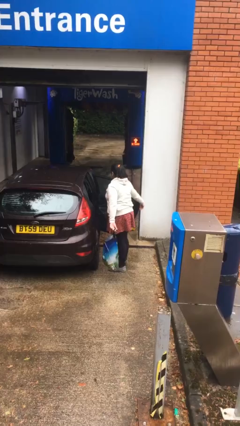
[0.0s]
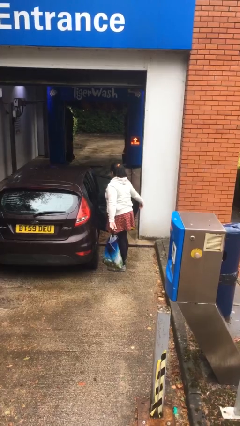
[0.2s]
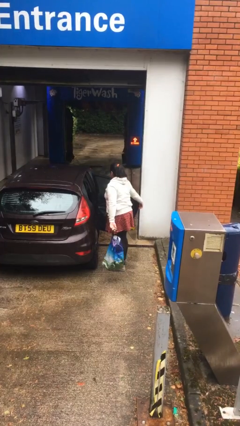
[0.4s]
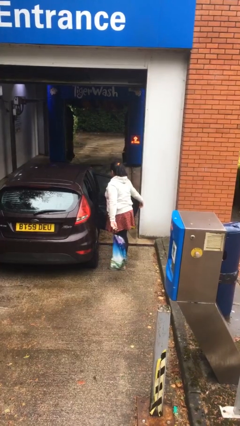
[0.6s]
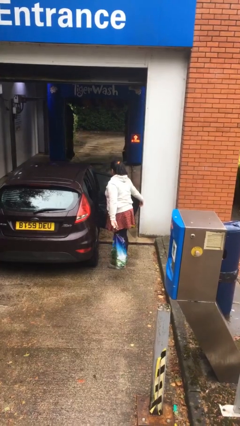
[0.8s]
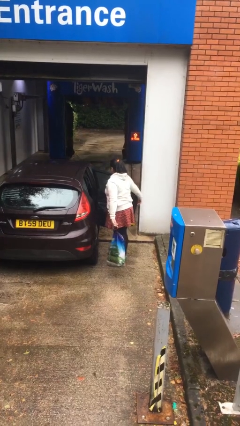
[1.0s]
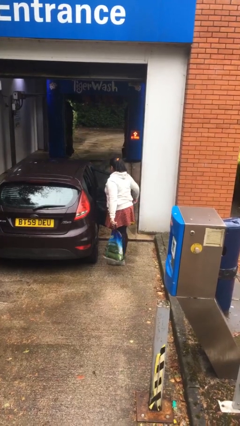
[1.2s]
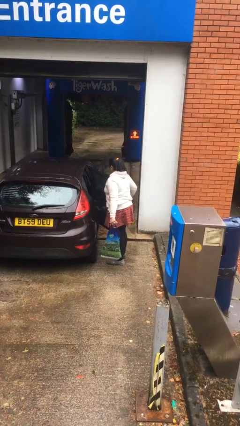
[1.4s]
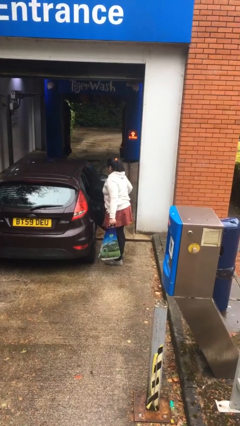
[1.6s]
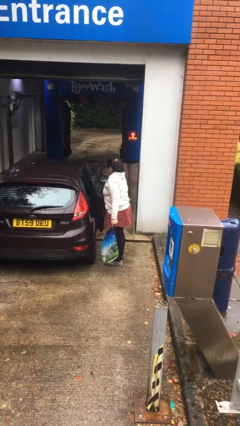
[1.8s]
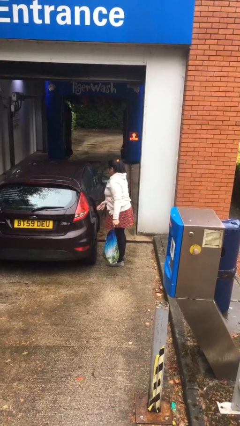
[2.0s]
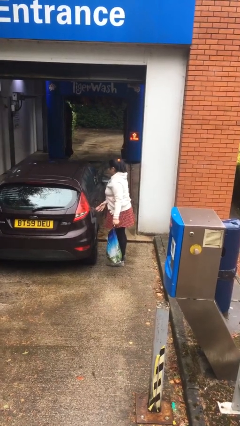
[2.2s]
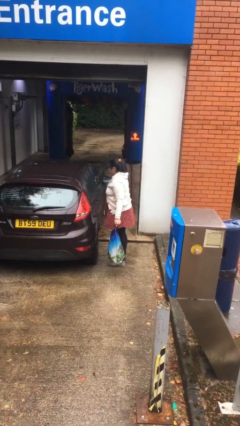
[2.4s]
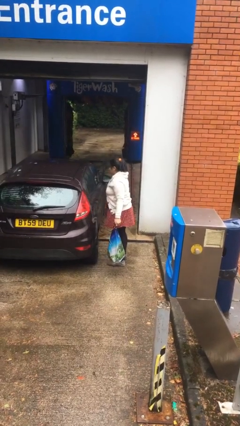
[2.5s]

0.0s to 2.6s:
person closes car door

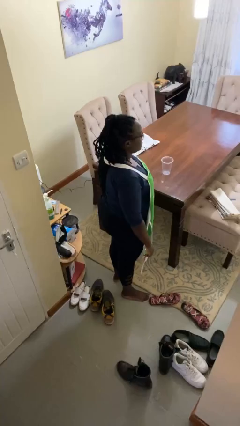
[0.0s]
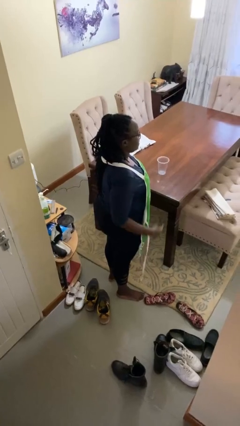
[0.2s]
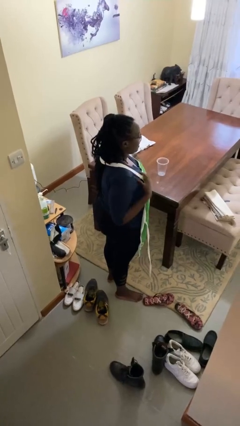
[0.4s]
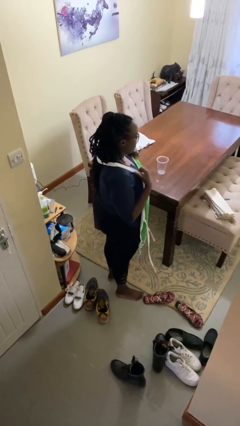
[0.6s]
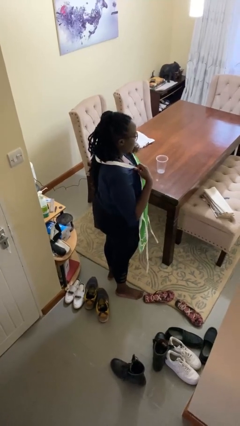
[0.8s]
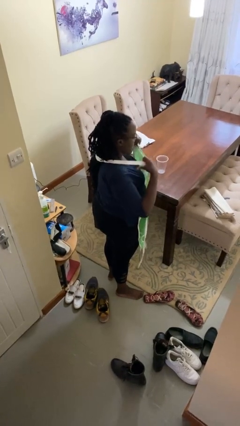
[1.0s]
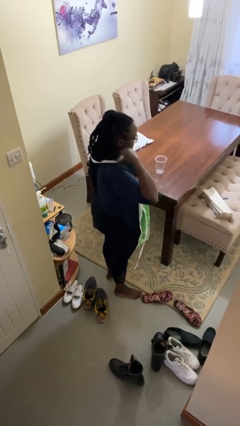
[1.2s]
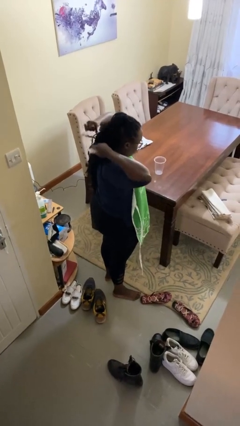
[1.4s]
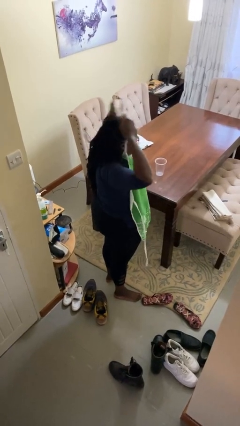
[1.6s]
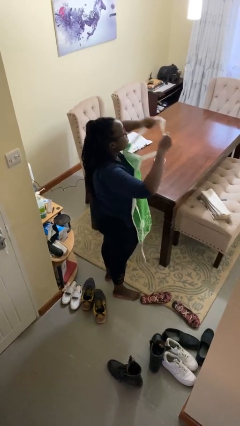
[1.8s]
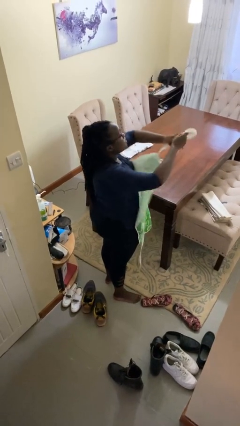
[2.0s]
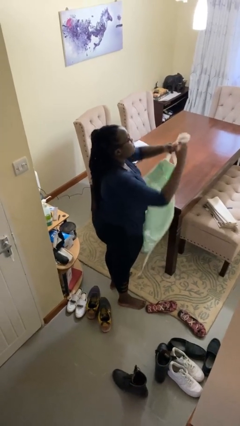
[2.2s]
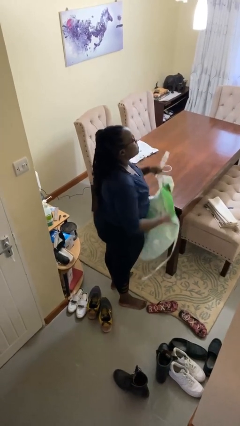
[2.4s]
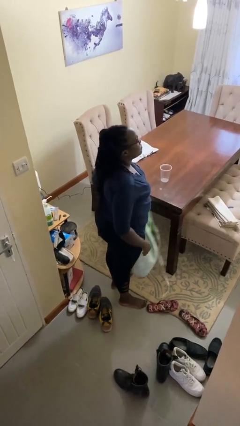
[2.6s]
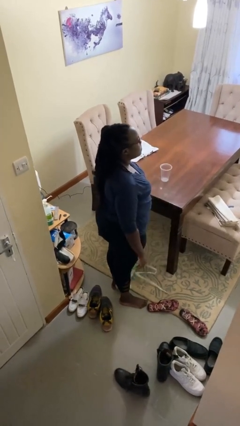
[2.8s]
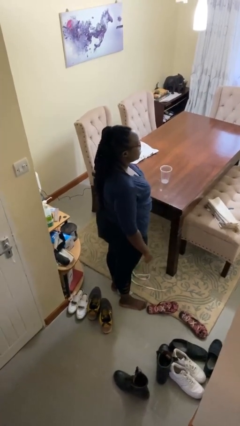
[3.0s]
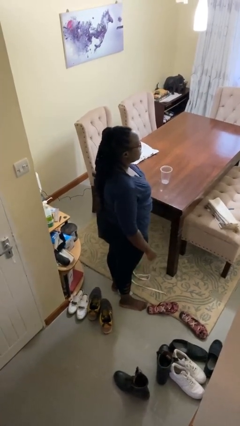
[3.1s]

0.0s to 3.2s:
person takes off apron

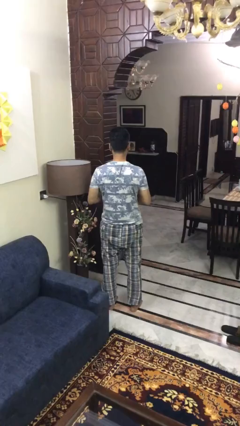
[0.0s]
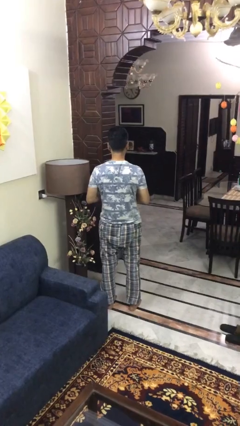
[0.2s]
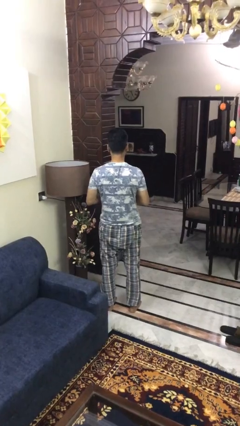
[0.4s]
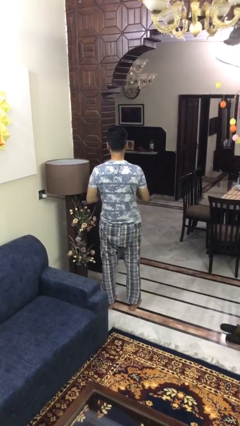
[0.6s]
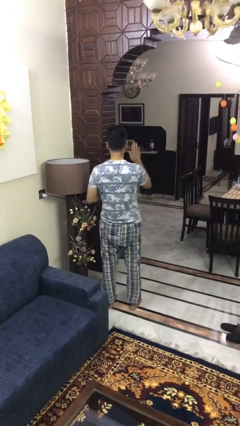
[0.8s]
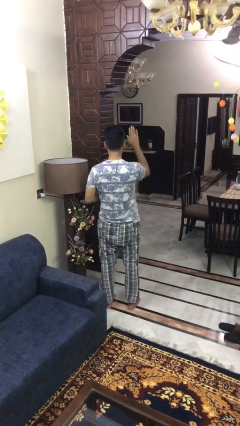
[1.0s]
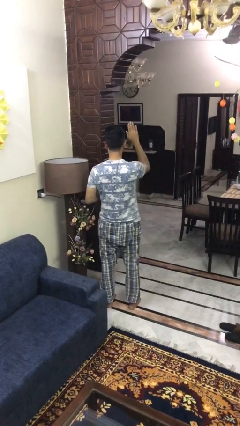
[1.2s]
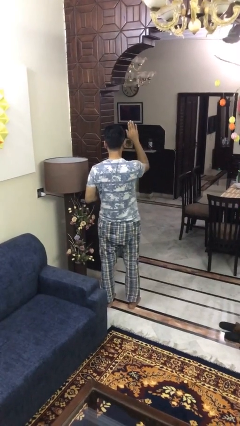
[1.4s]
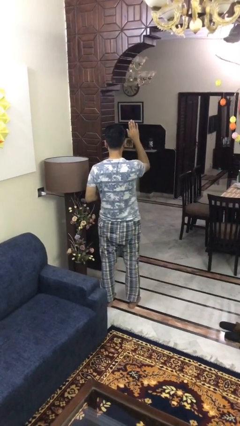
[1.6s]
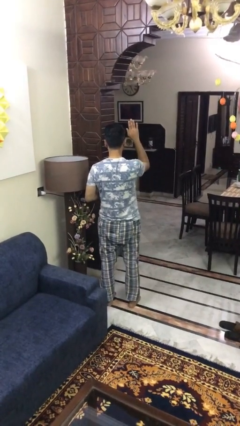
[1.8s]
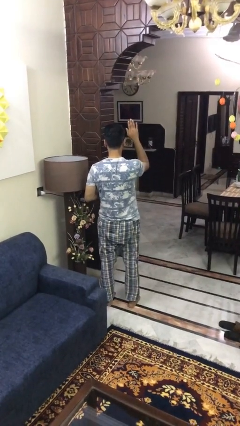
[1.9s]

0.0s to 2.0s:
person gestures raise hand

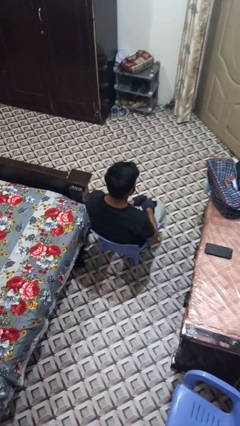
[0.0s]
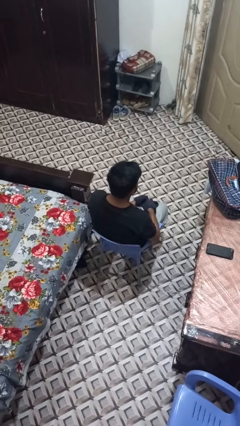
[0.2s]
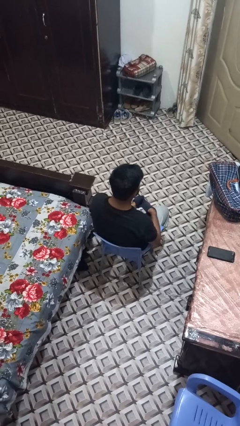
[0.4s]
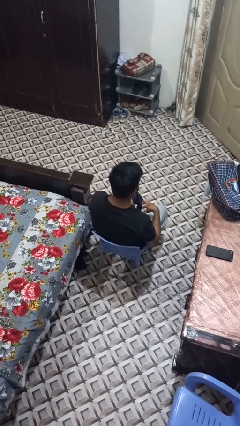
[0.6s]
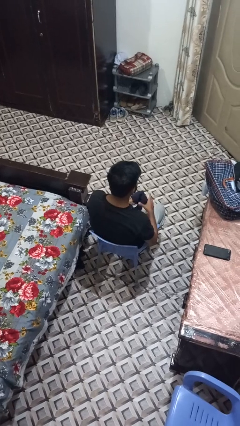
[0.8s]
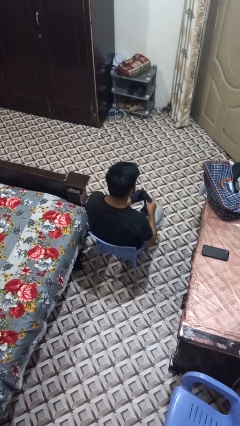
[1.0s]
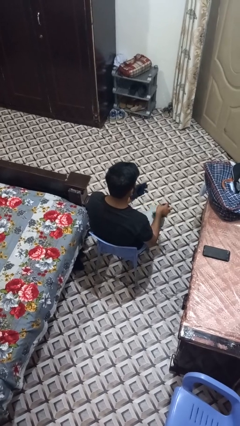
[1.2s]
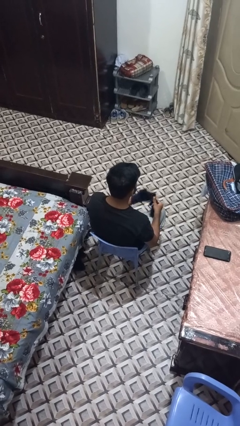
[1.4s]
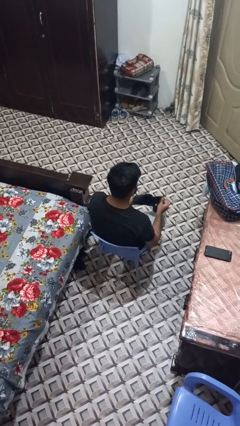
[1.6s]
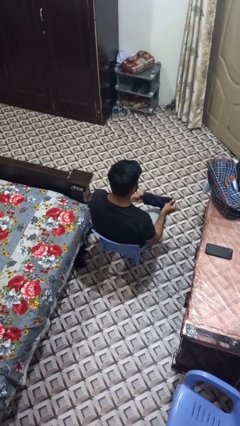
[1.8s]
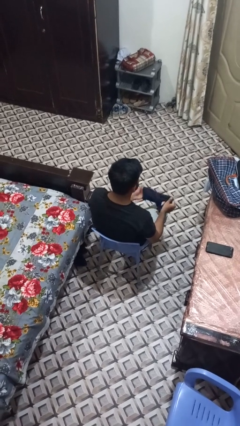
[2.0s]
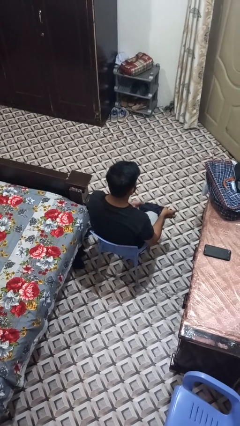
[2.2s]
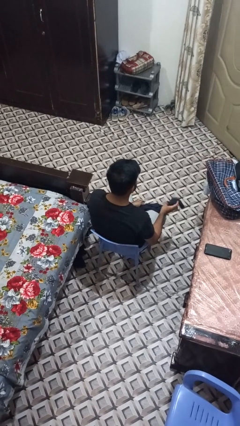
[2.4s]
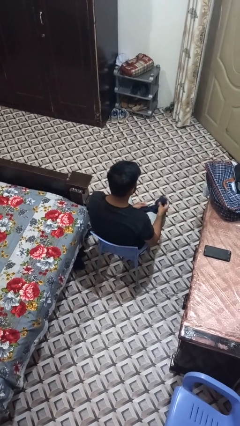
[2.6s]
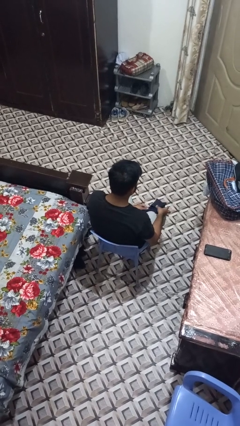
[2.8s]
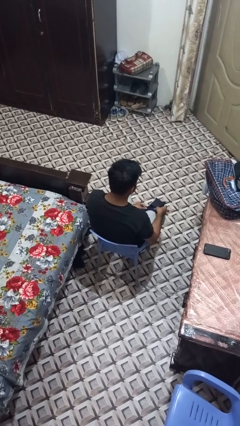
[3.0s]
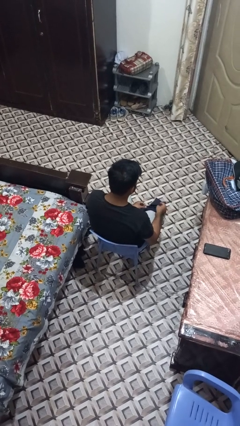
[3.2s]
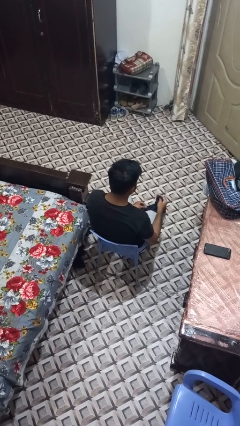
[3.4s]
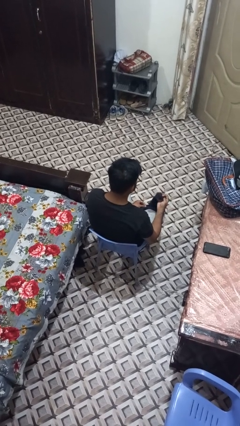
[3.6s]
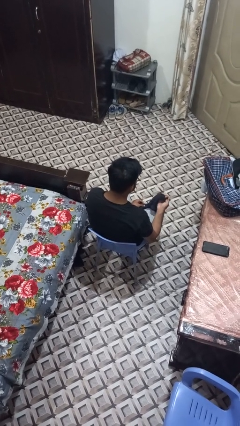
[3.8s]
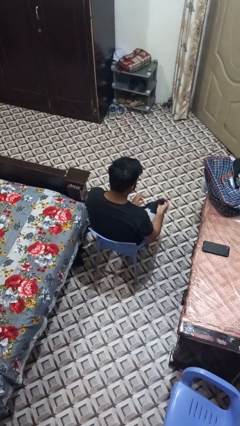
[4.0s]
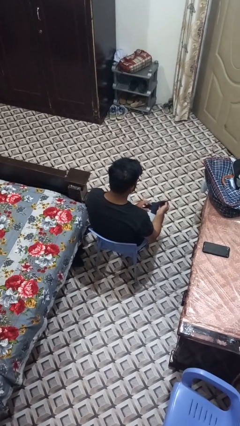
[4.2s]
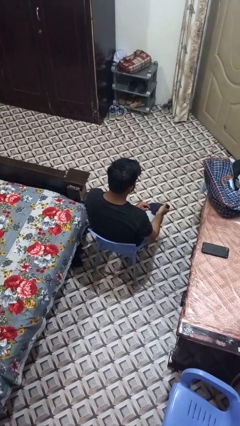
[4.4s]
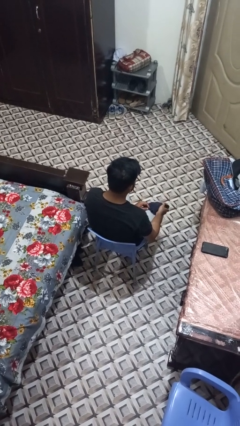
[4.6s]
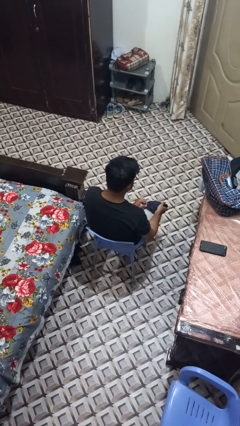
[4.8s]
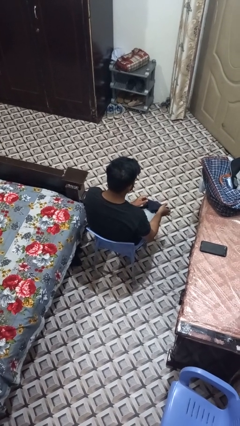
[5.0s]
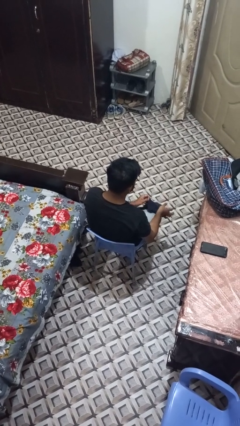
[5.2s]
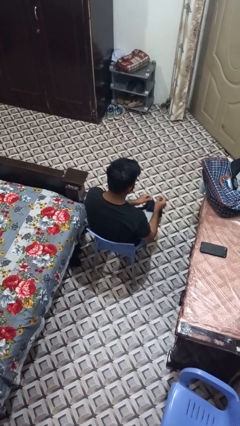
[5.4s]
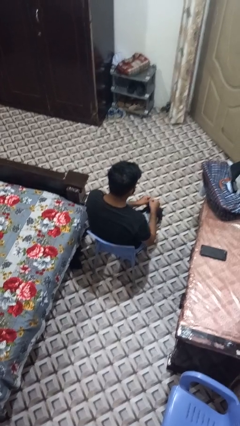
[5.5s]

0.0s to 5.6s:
person takes off gloves

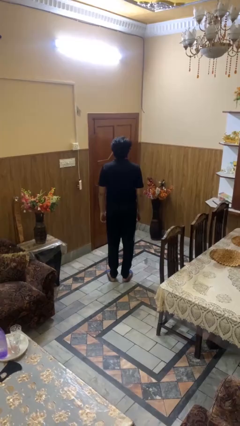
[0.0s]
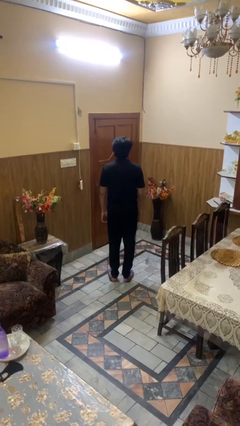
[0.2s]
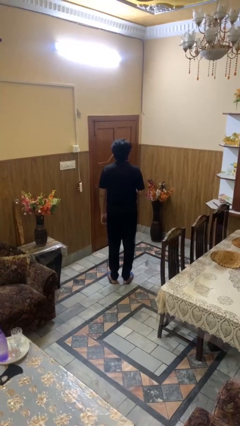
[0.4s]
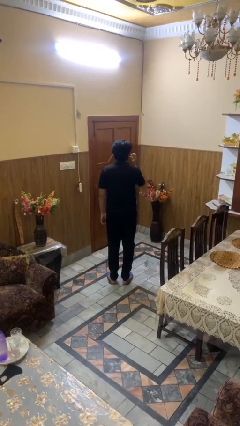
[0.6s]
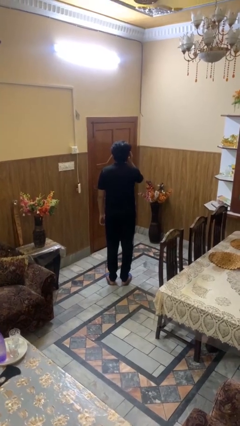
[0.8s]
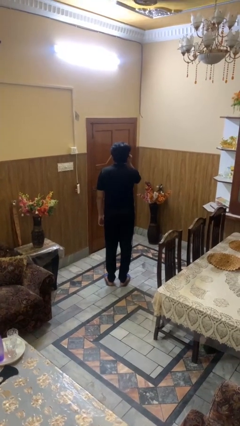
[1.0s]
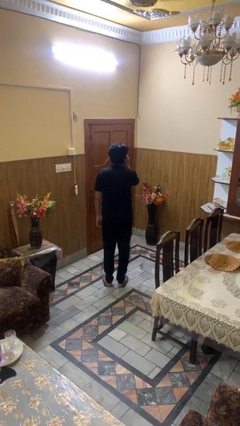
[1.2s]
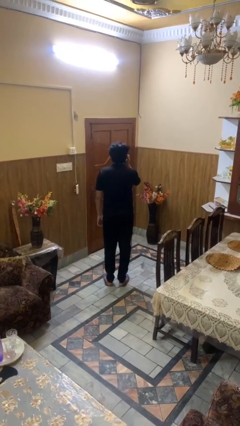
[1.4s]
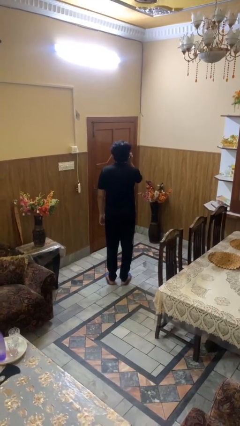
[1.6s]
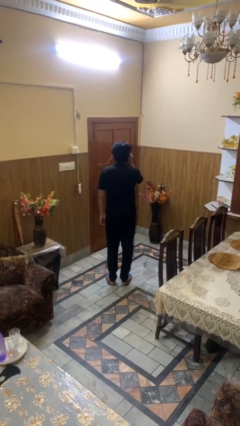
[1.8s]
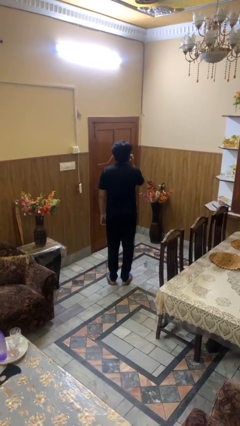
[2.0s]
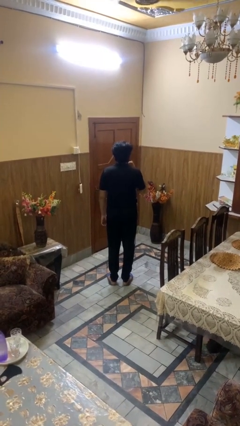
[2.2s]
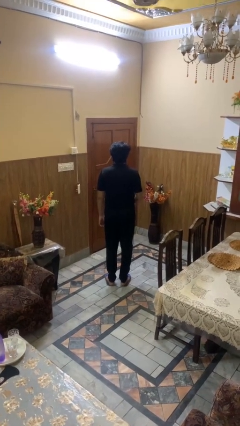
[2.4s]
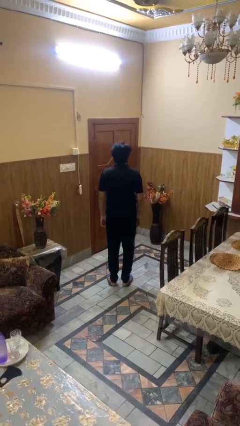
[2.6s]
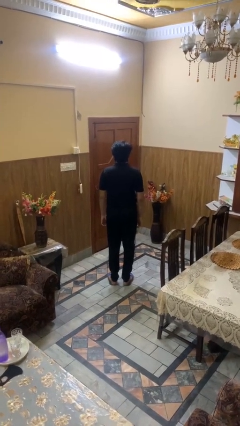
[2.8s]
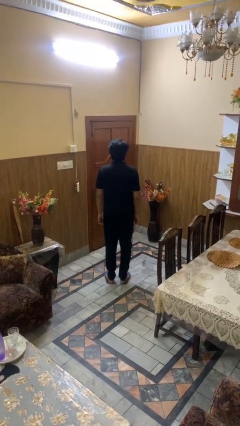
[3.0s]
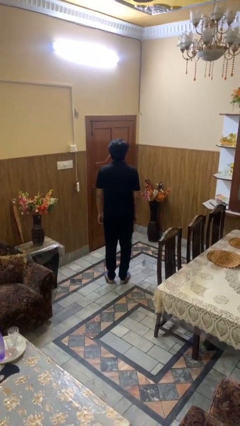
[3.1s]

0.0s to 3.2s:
person touches earlobe

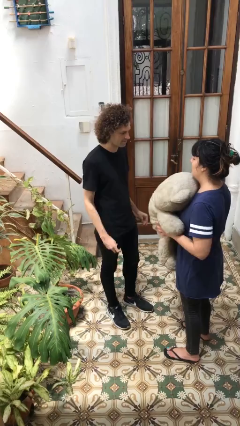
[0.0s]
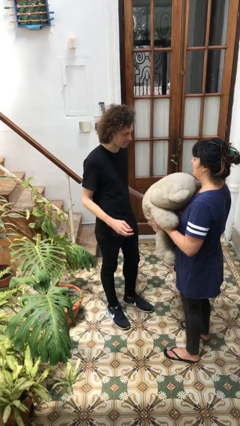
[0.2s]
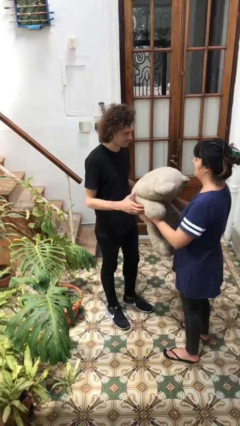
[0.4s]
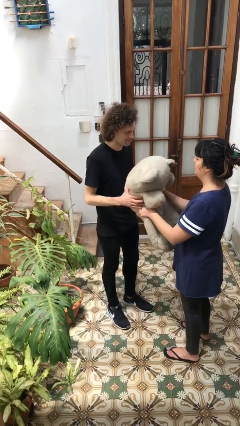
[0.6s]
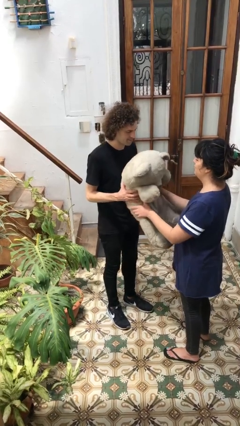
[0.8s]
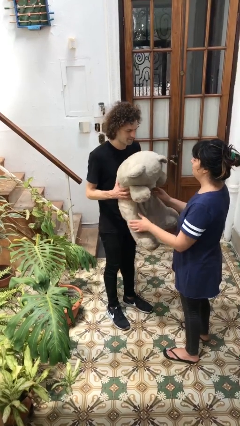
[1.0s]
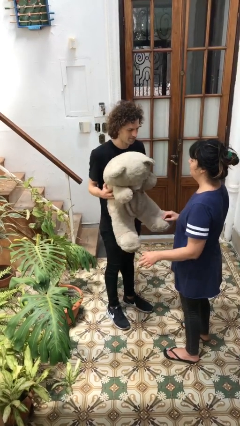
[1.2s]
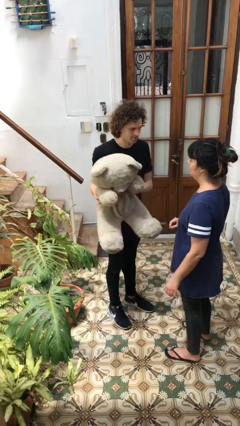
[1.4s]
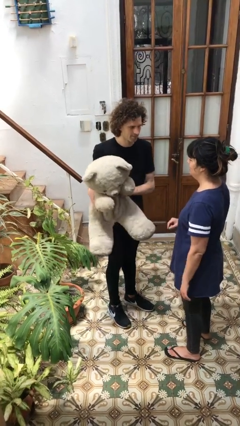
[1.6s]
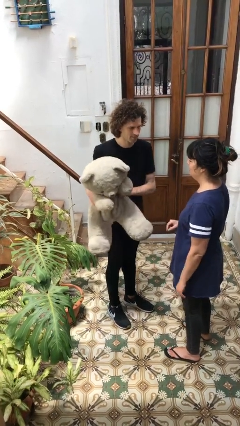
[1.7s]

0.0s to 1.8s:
person transfers object to person
